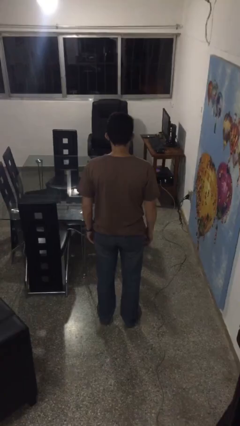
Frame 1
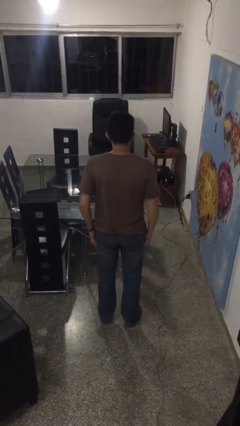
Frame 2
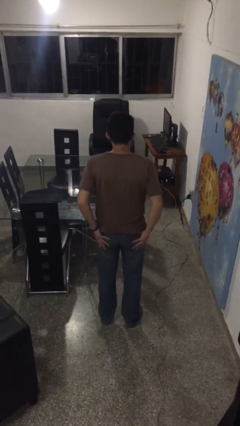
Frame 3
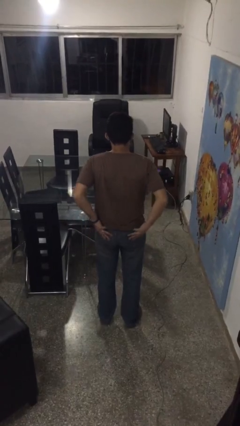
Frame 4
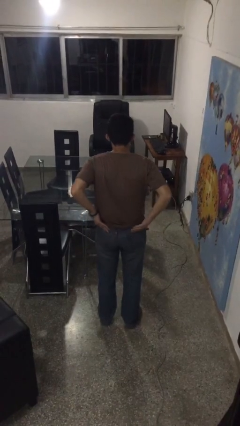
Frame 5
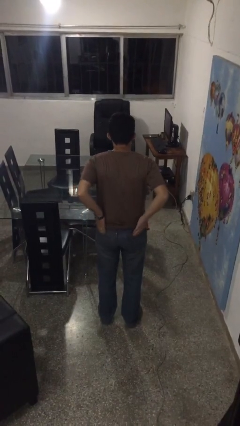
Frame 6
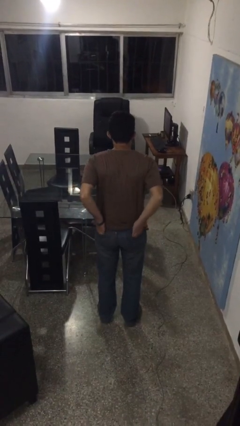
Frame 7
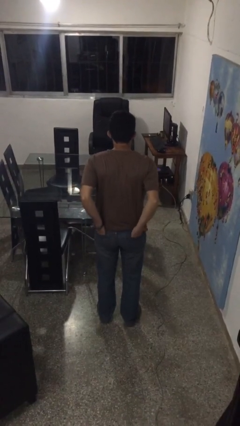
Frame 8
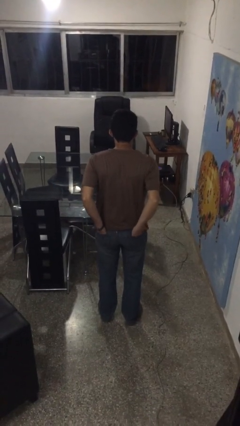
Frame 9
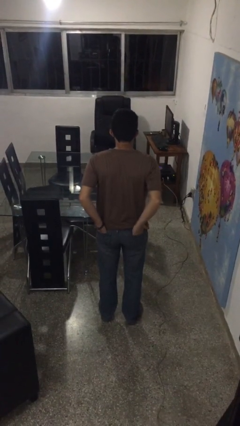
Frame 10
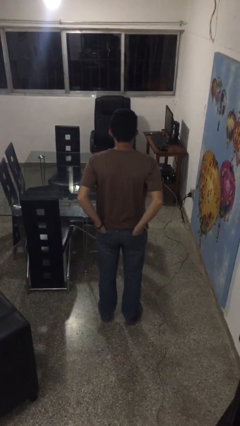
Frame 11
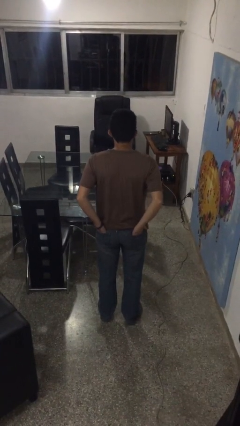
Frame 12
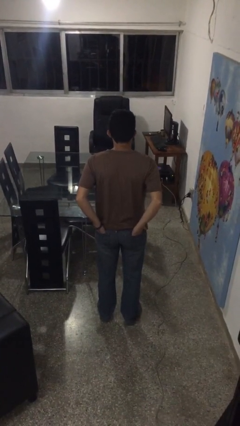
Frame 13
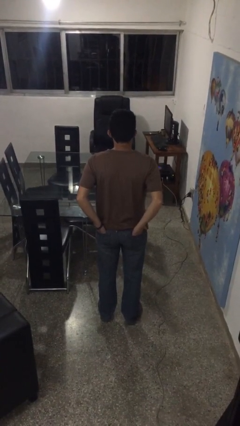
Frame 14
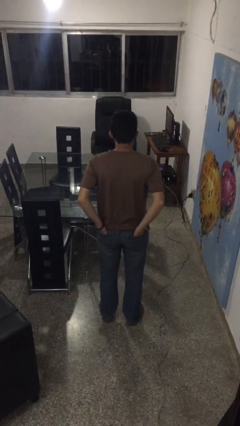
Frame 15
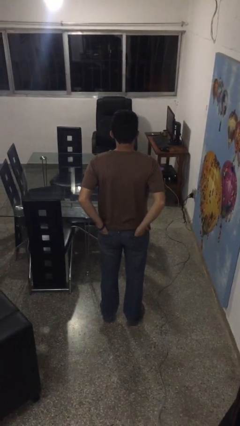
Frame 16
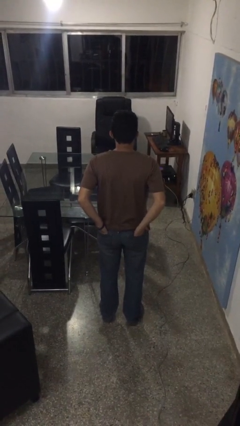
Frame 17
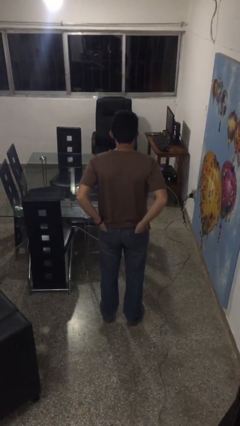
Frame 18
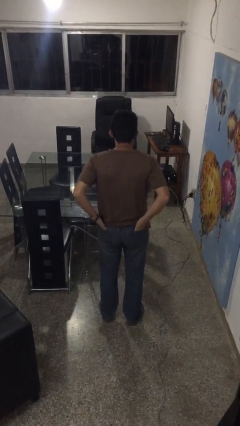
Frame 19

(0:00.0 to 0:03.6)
person puts hands in back pockets

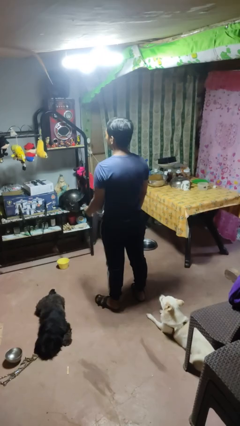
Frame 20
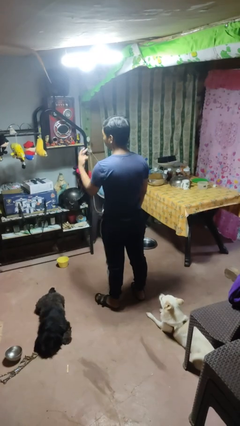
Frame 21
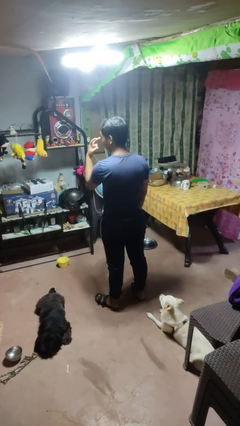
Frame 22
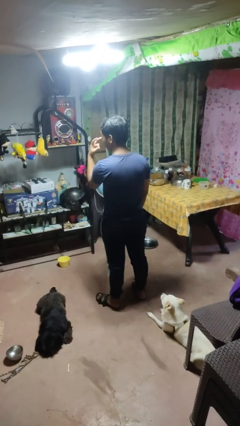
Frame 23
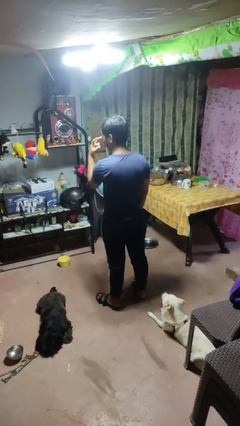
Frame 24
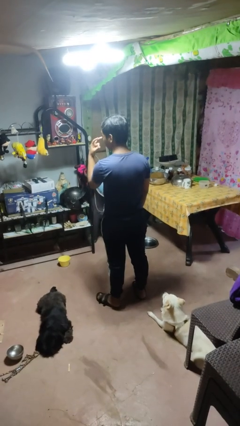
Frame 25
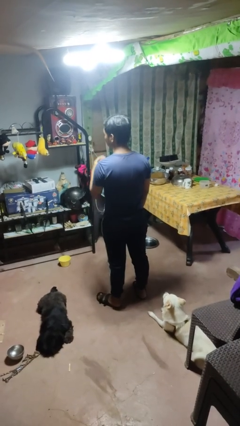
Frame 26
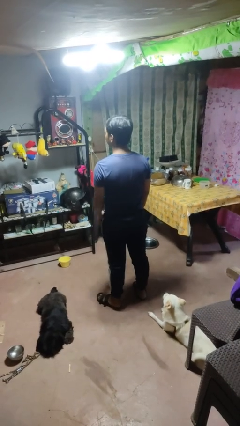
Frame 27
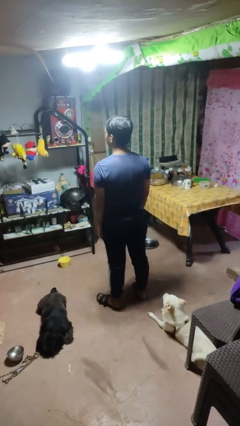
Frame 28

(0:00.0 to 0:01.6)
person gestures watch closely

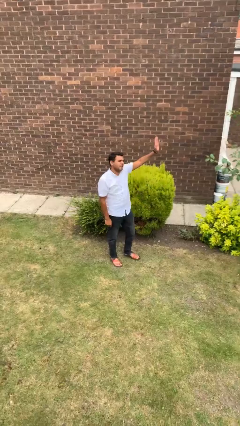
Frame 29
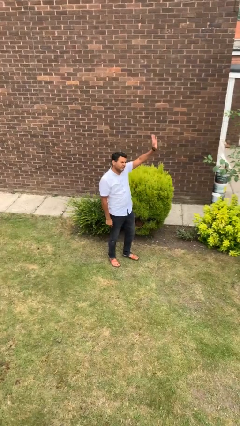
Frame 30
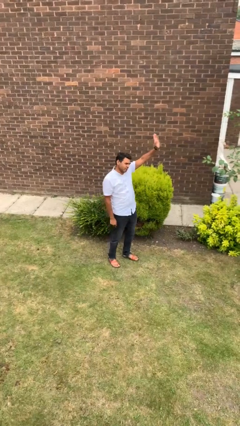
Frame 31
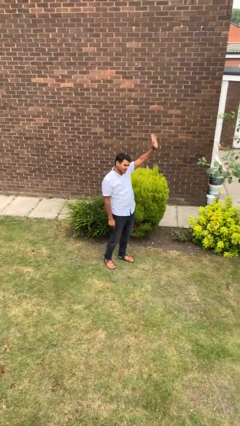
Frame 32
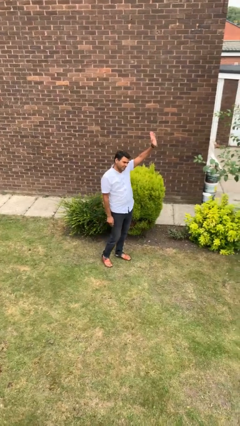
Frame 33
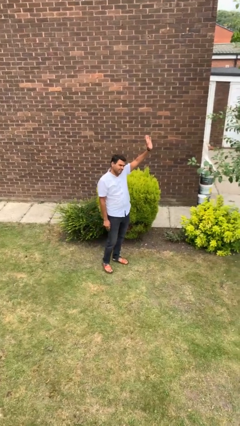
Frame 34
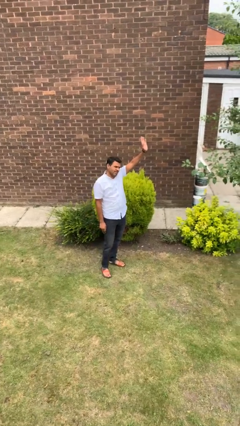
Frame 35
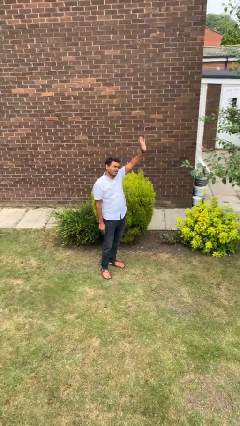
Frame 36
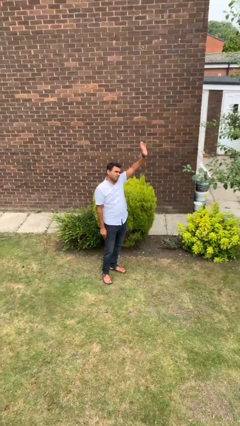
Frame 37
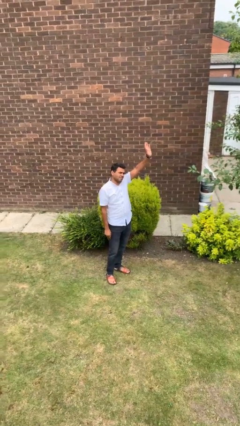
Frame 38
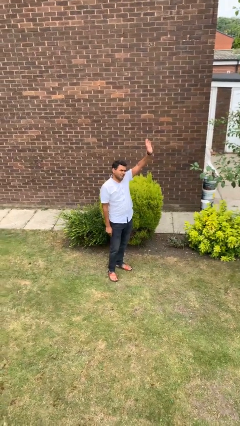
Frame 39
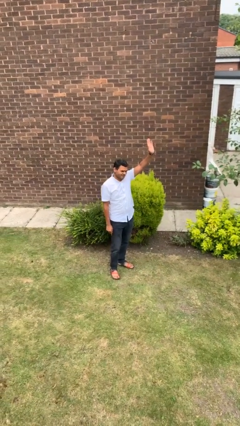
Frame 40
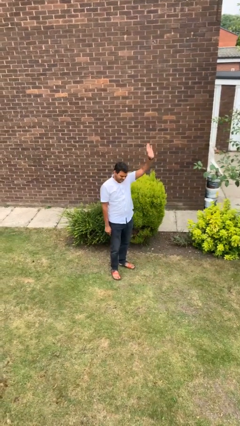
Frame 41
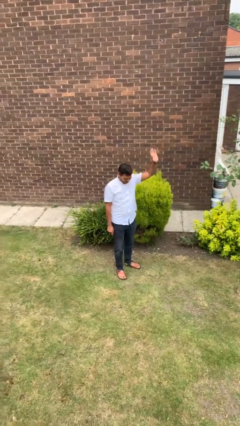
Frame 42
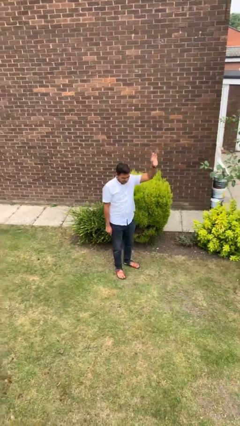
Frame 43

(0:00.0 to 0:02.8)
person gestures raise hand

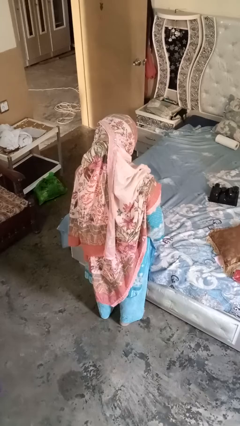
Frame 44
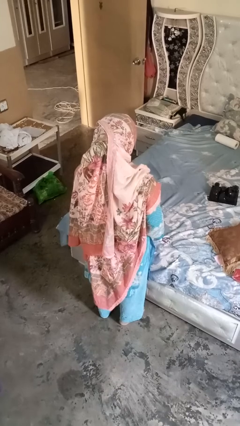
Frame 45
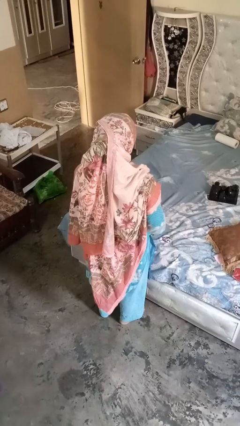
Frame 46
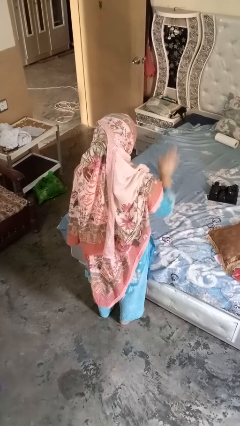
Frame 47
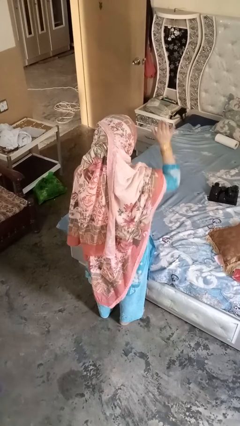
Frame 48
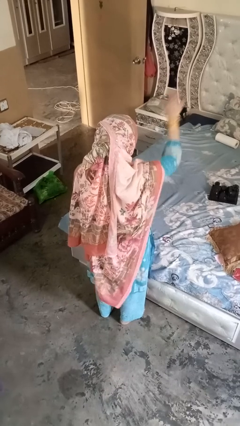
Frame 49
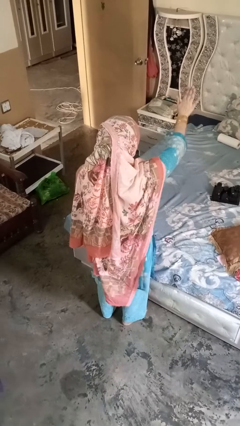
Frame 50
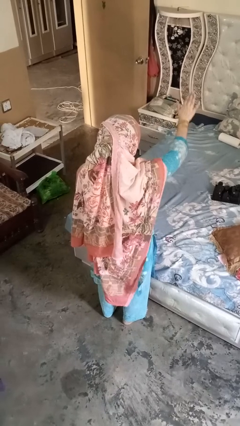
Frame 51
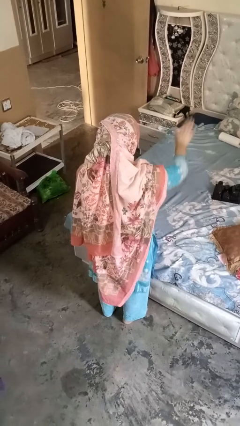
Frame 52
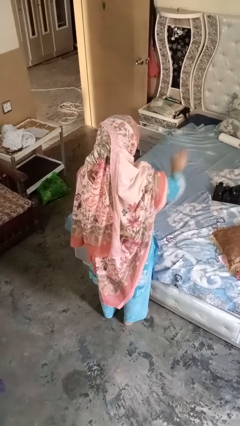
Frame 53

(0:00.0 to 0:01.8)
person gestures stop

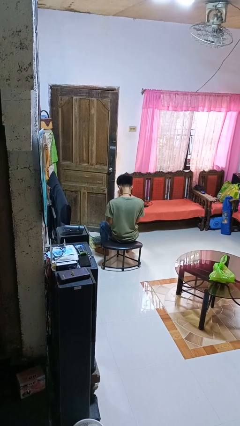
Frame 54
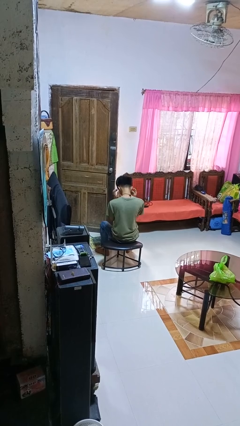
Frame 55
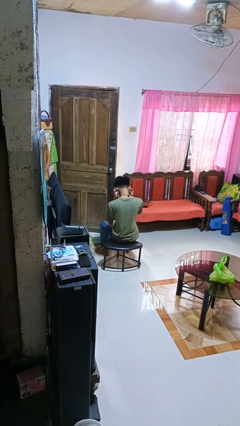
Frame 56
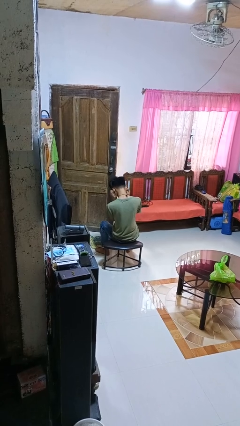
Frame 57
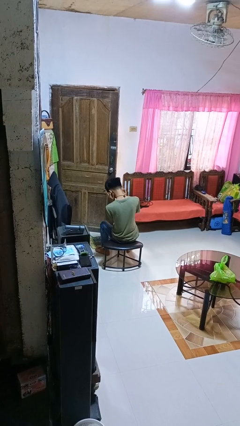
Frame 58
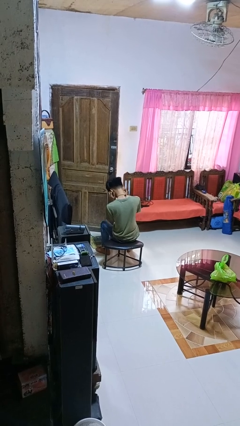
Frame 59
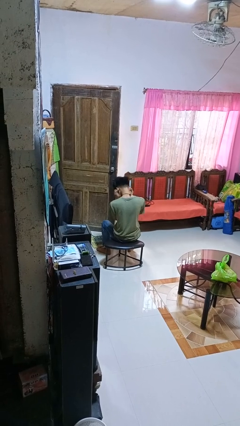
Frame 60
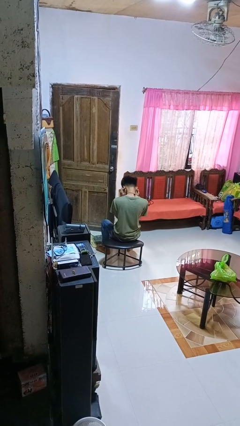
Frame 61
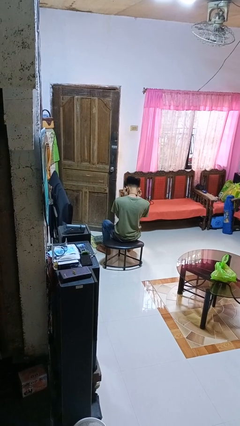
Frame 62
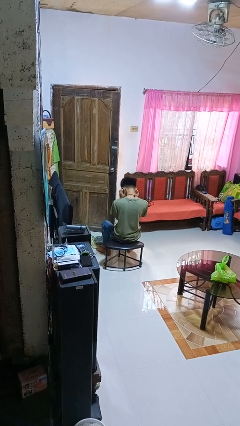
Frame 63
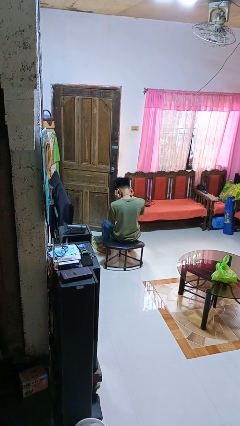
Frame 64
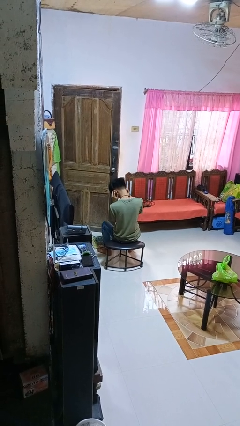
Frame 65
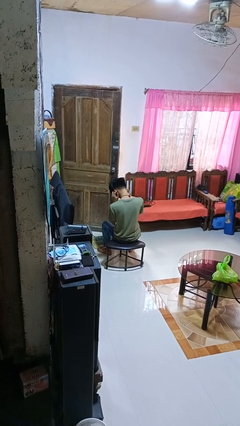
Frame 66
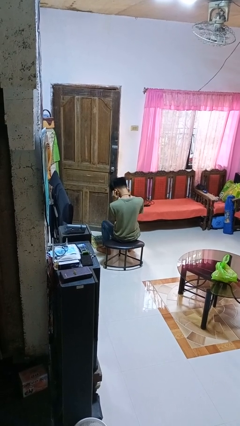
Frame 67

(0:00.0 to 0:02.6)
person puts fingers in ear

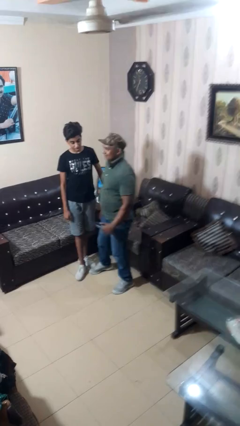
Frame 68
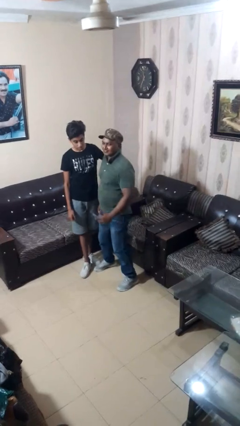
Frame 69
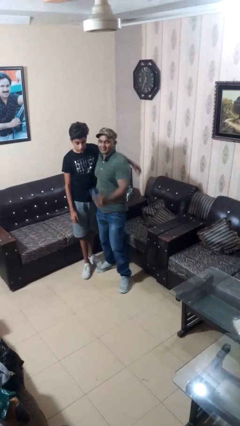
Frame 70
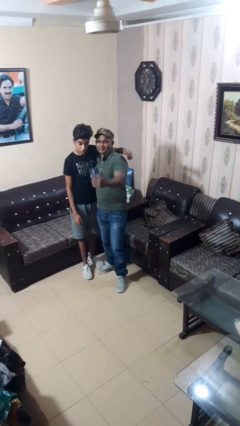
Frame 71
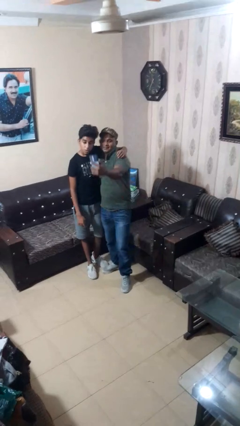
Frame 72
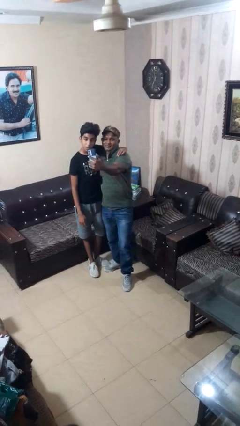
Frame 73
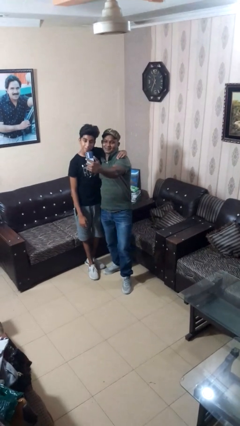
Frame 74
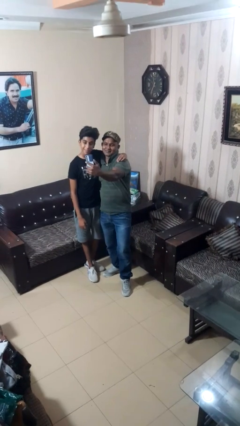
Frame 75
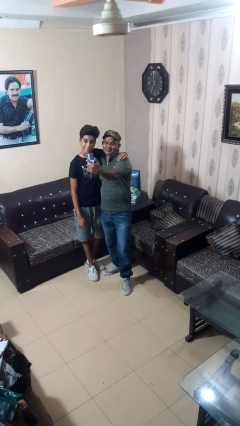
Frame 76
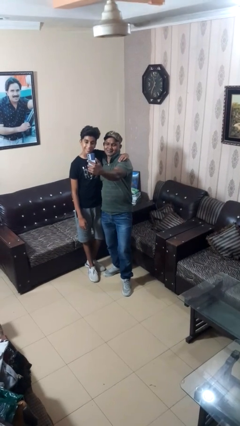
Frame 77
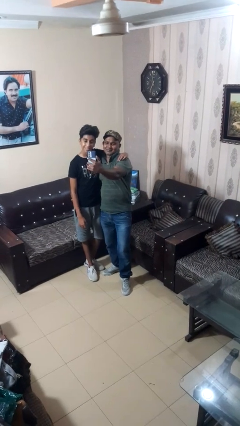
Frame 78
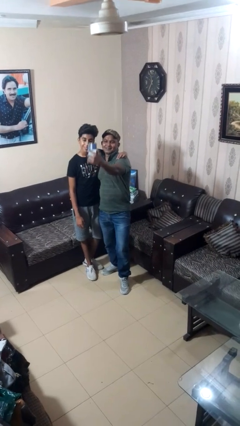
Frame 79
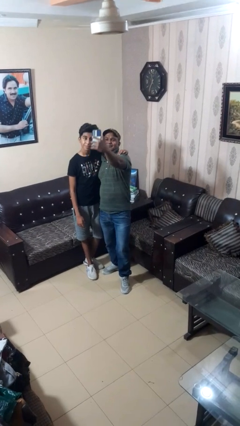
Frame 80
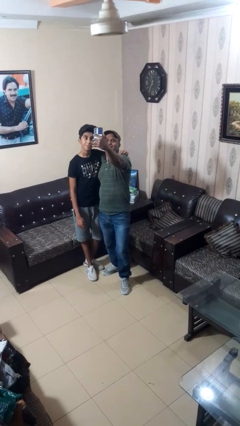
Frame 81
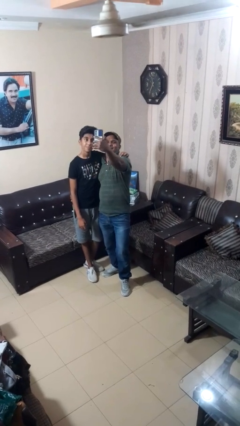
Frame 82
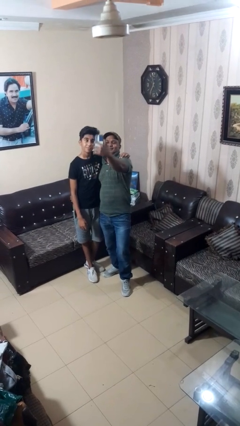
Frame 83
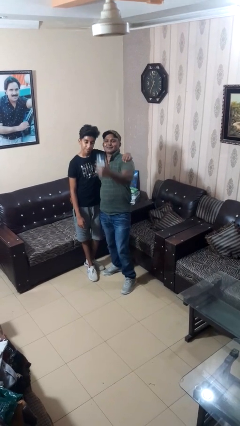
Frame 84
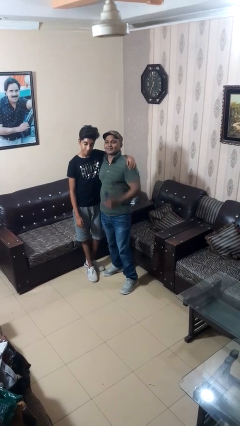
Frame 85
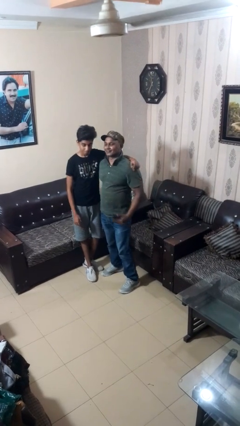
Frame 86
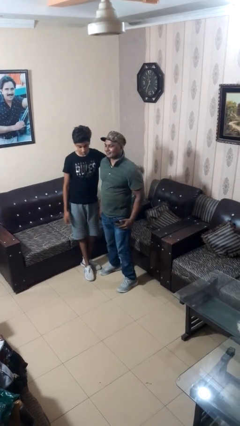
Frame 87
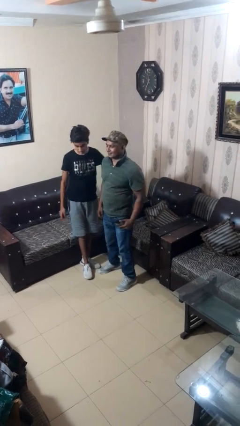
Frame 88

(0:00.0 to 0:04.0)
person takes selfie with person

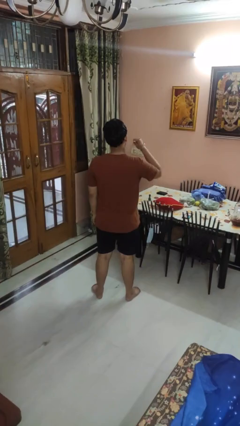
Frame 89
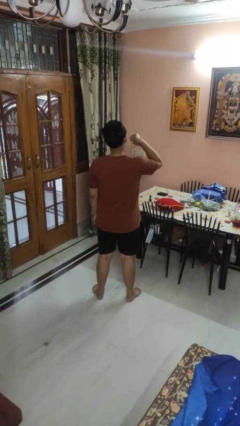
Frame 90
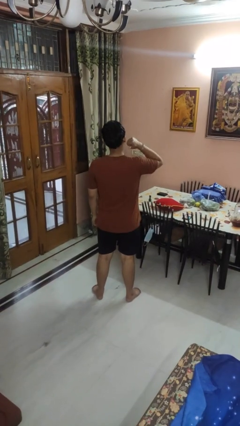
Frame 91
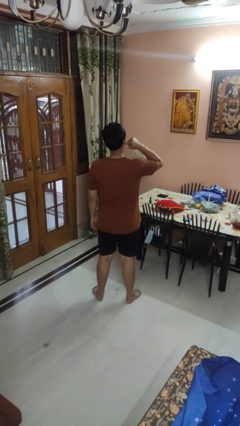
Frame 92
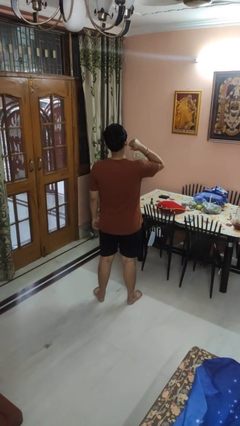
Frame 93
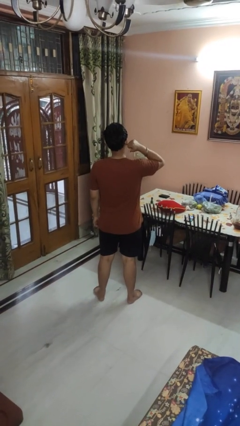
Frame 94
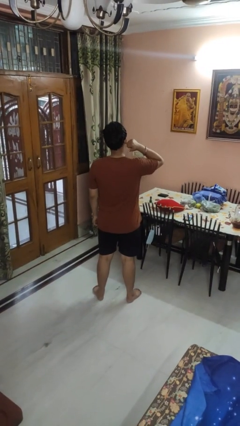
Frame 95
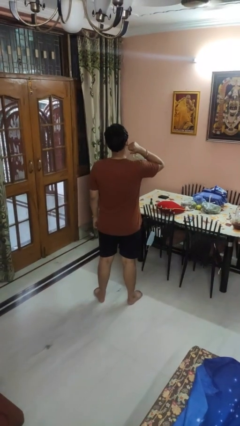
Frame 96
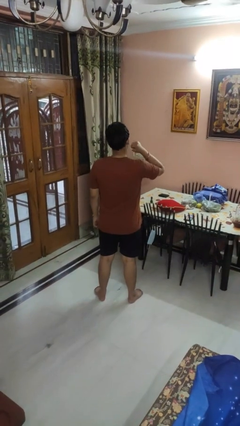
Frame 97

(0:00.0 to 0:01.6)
person gestures behind me
